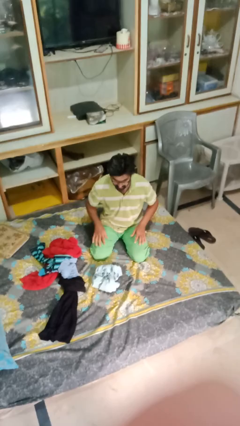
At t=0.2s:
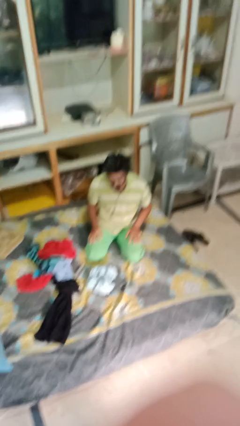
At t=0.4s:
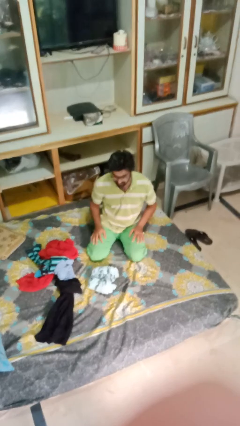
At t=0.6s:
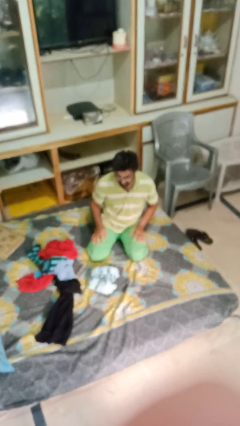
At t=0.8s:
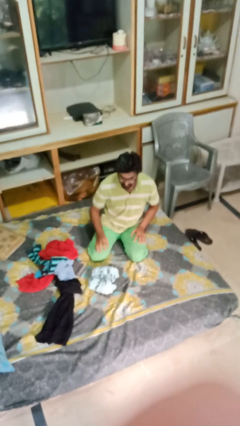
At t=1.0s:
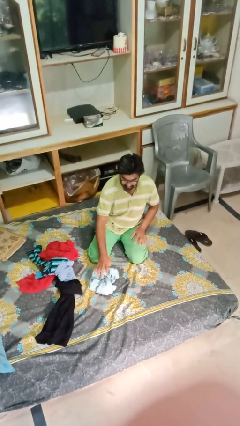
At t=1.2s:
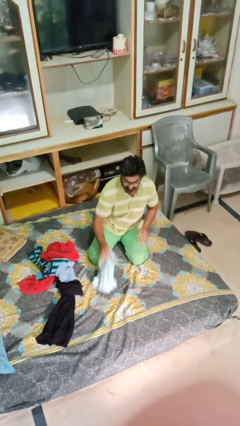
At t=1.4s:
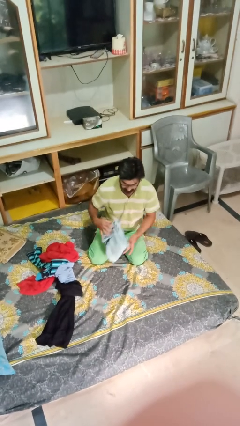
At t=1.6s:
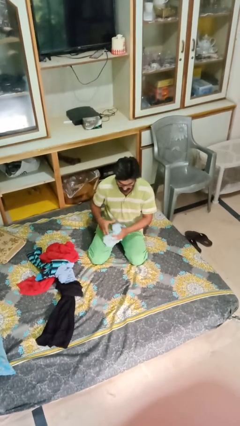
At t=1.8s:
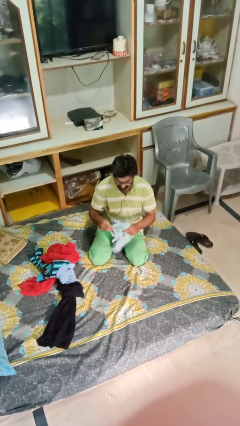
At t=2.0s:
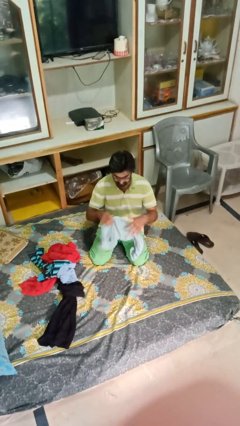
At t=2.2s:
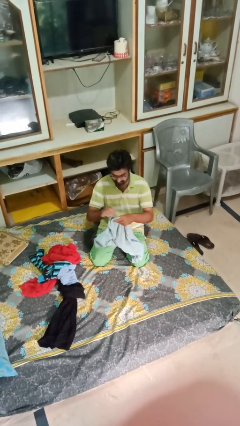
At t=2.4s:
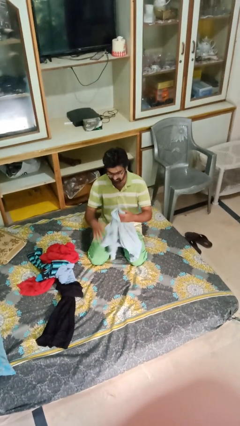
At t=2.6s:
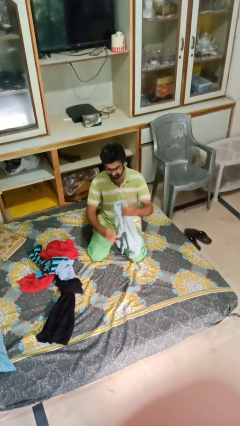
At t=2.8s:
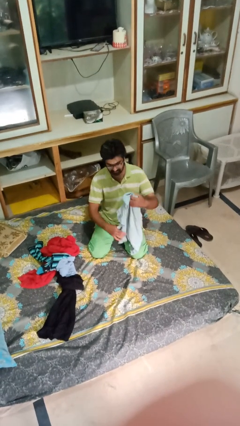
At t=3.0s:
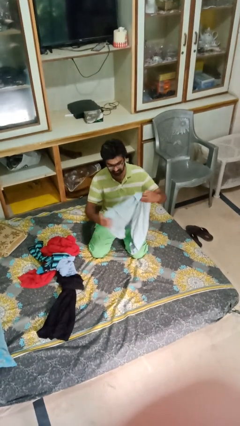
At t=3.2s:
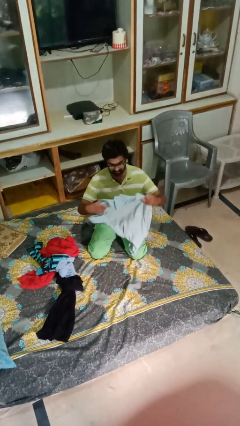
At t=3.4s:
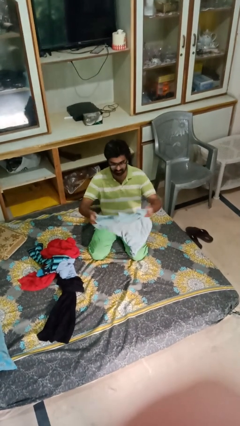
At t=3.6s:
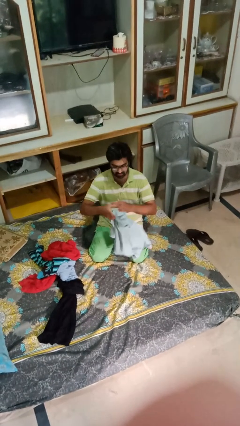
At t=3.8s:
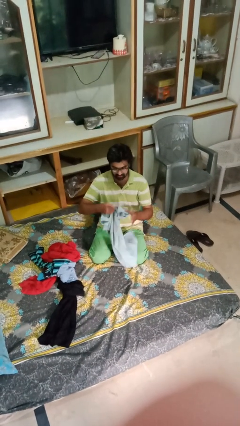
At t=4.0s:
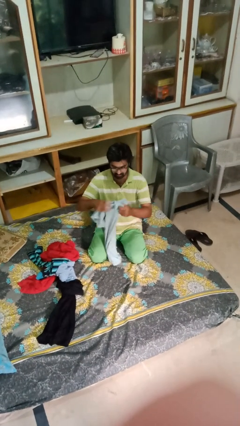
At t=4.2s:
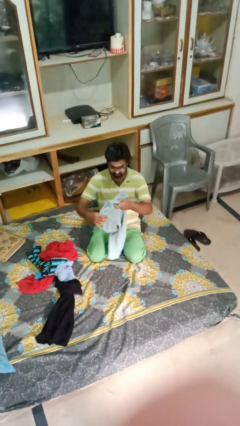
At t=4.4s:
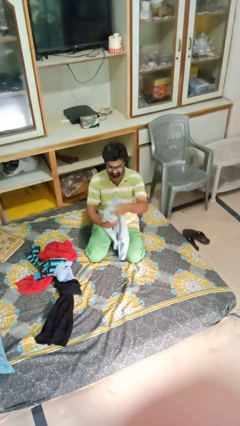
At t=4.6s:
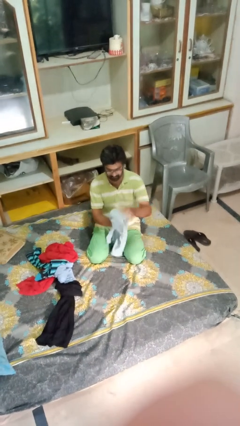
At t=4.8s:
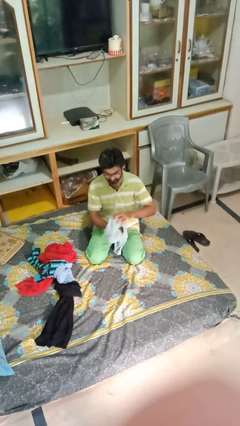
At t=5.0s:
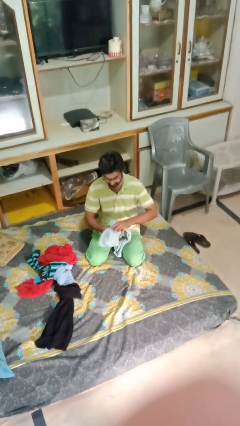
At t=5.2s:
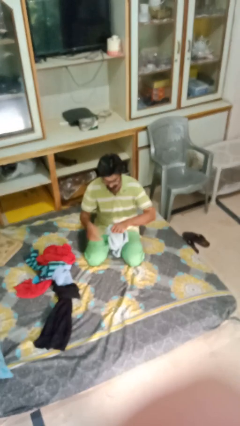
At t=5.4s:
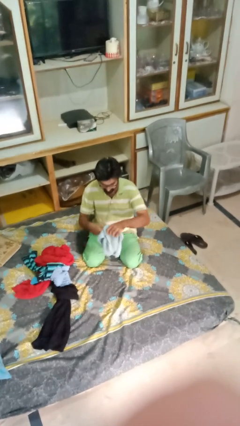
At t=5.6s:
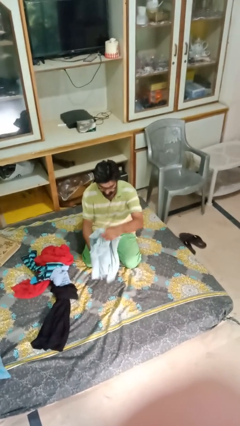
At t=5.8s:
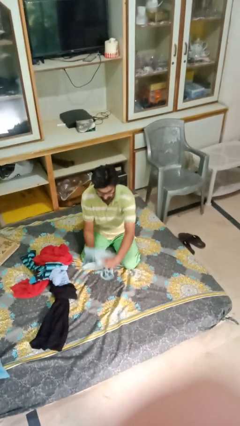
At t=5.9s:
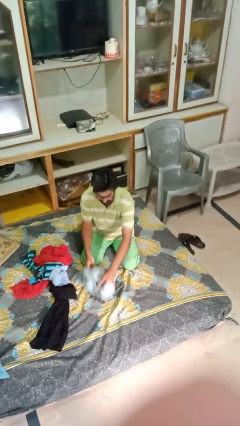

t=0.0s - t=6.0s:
person folds shirt

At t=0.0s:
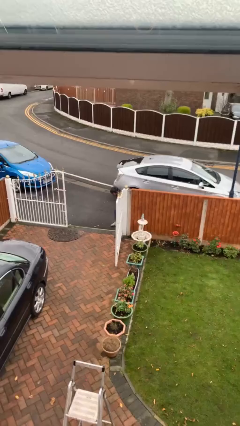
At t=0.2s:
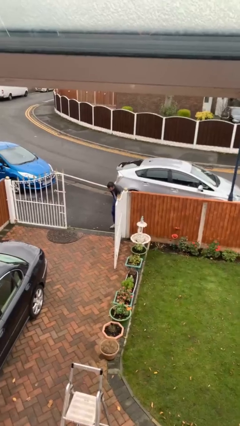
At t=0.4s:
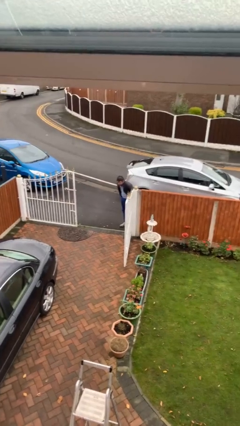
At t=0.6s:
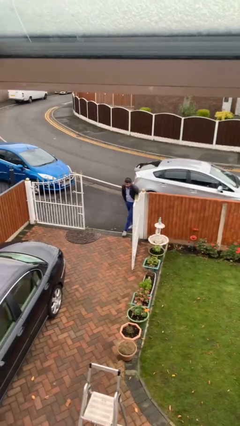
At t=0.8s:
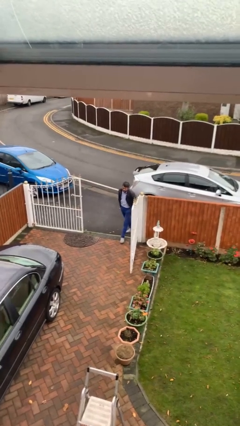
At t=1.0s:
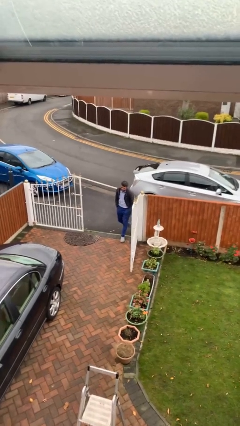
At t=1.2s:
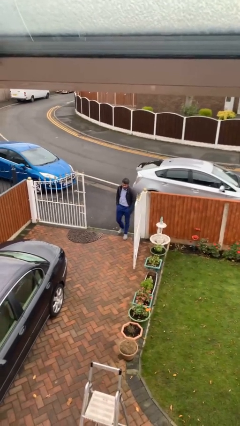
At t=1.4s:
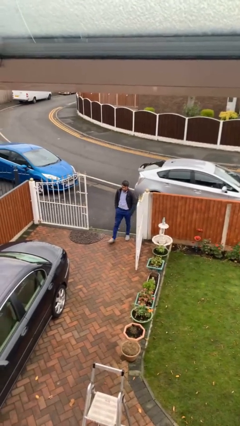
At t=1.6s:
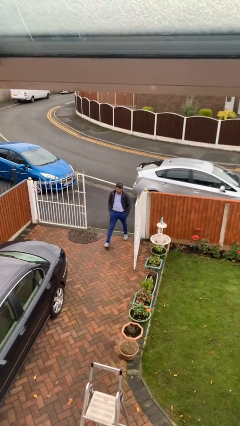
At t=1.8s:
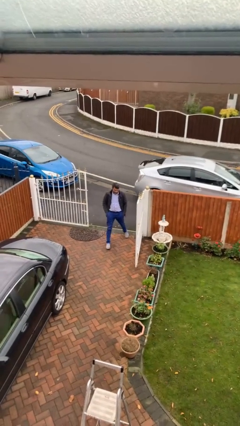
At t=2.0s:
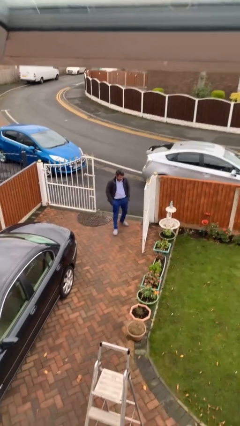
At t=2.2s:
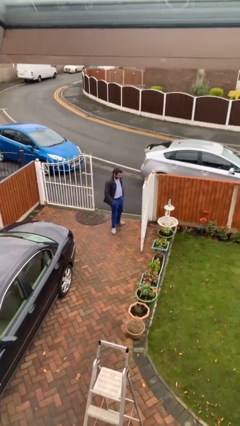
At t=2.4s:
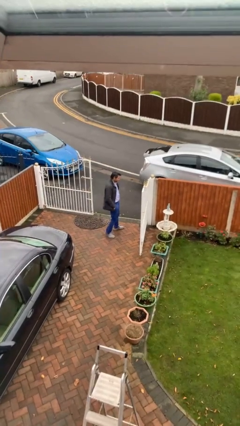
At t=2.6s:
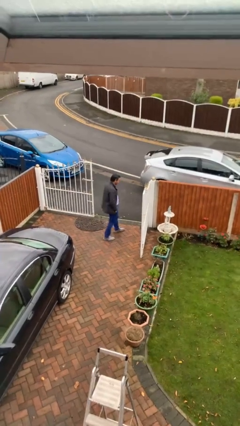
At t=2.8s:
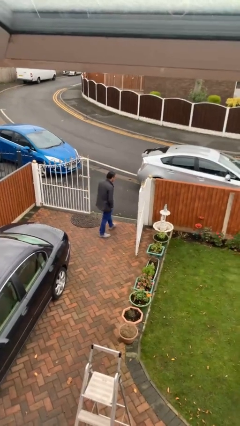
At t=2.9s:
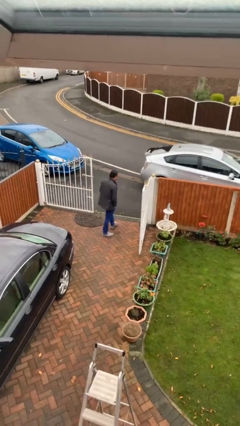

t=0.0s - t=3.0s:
person enters scene through structure

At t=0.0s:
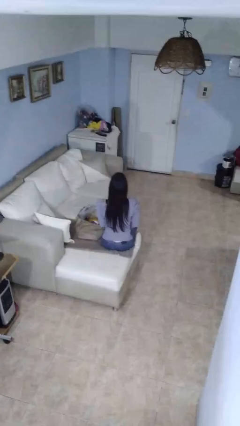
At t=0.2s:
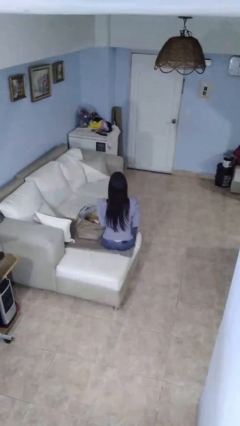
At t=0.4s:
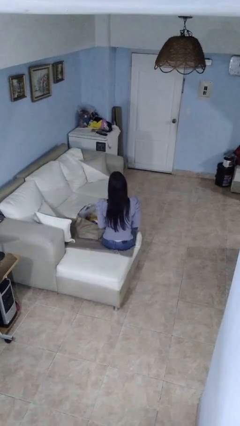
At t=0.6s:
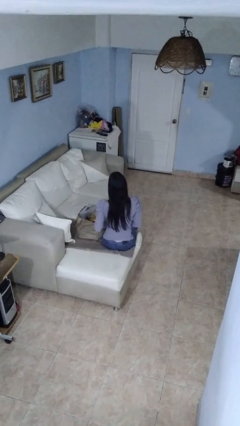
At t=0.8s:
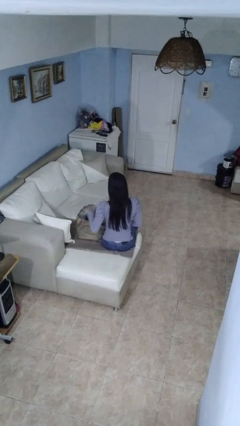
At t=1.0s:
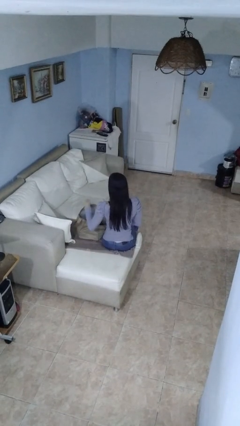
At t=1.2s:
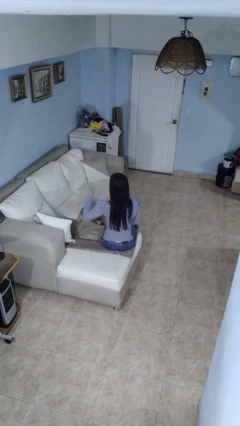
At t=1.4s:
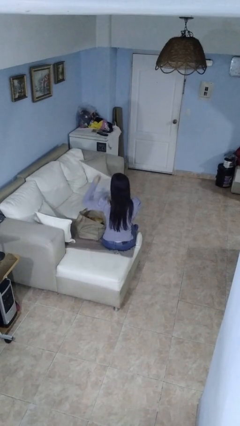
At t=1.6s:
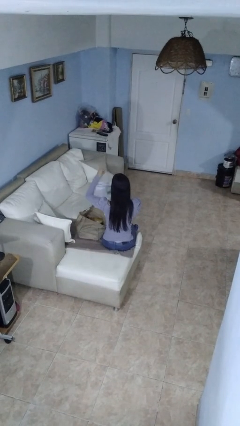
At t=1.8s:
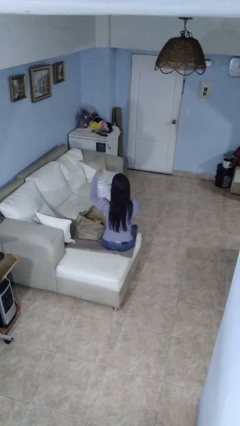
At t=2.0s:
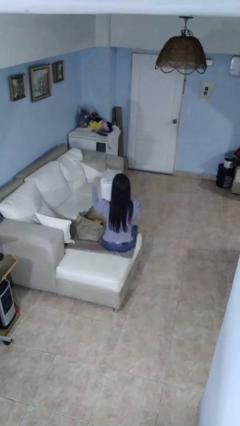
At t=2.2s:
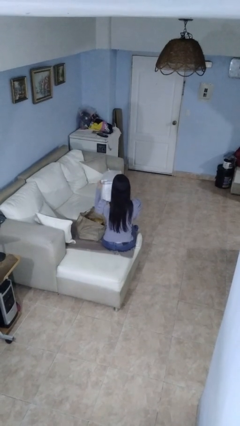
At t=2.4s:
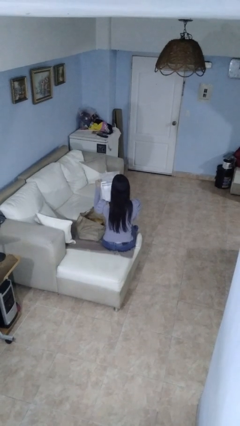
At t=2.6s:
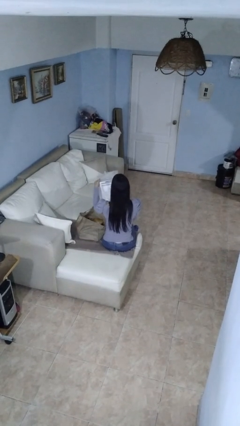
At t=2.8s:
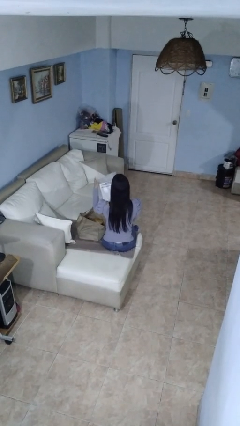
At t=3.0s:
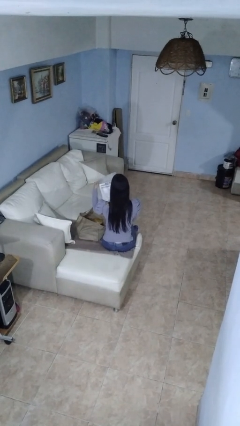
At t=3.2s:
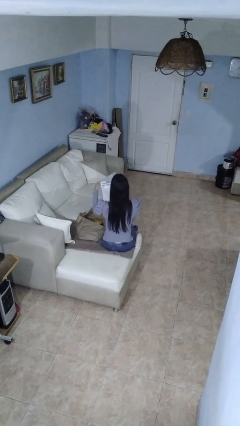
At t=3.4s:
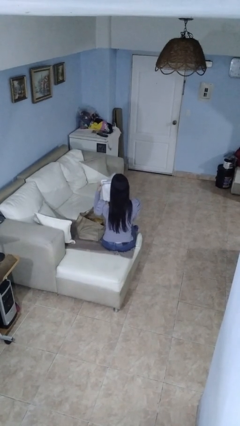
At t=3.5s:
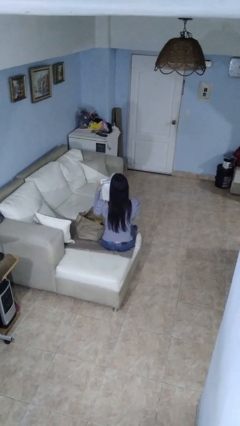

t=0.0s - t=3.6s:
person takes object from bag

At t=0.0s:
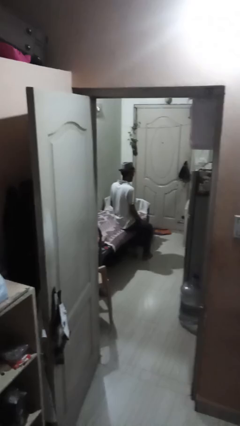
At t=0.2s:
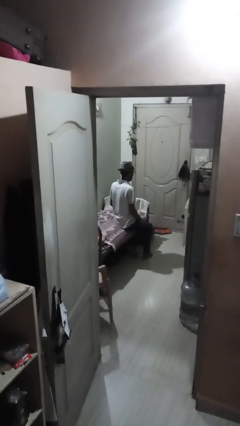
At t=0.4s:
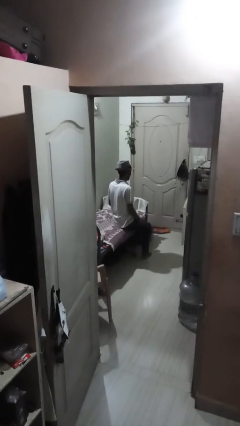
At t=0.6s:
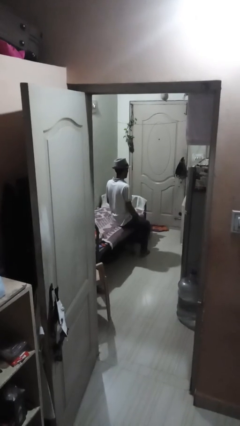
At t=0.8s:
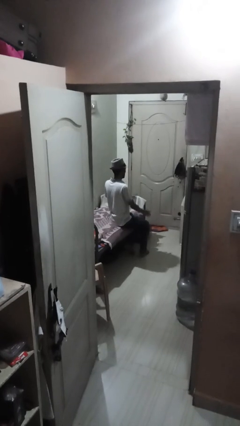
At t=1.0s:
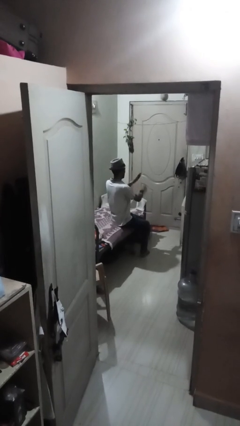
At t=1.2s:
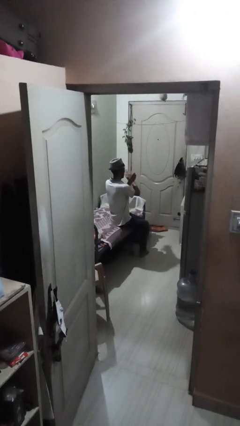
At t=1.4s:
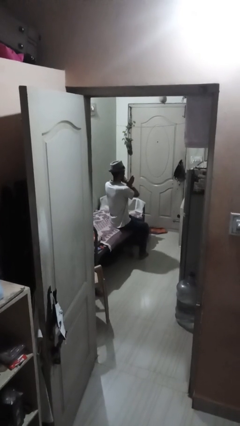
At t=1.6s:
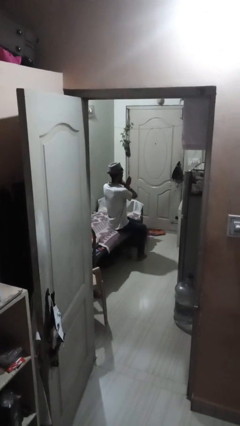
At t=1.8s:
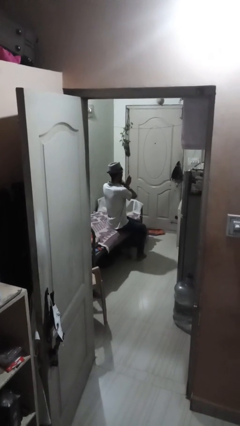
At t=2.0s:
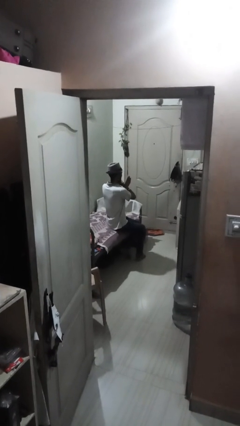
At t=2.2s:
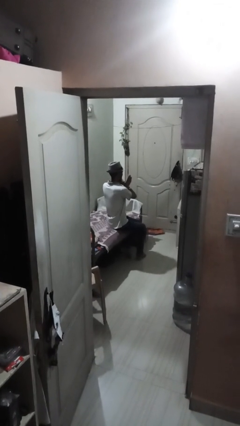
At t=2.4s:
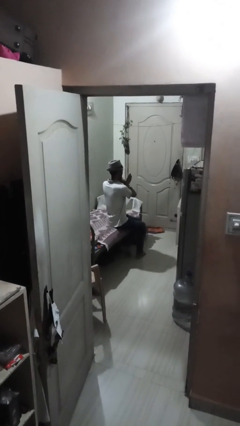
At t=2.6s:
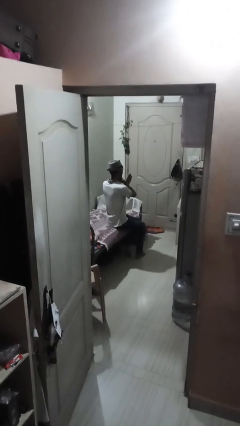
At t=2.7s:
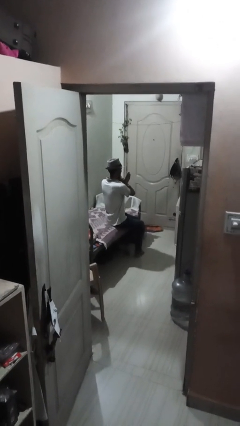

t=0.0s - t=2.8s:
person gestures arms x

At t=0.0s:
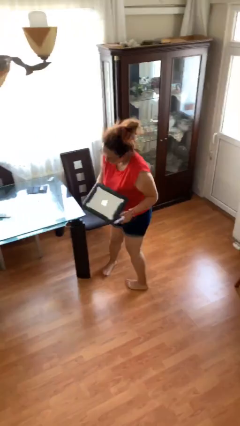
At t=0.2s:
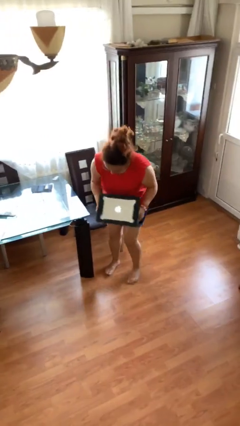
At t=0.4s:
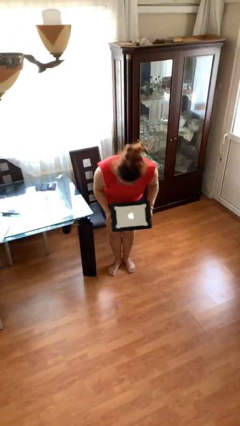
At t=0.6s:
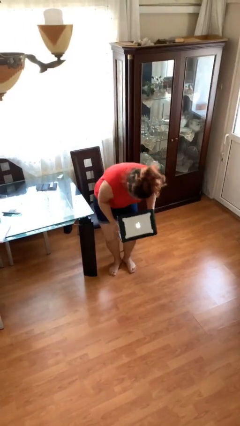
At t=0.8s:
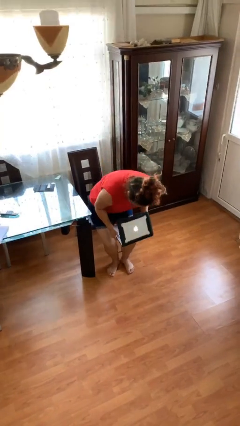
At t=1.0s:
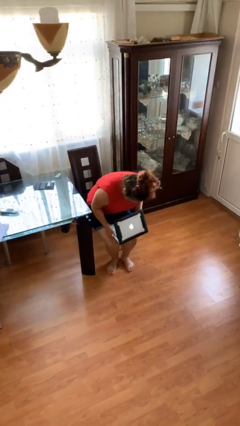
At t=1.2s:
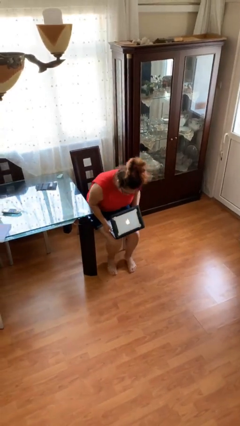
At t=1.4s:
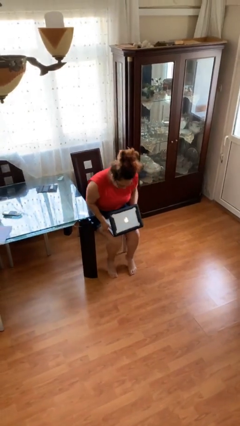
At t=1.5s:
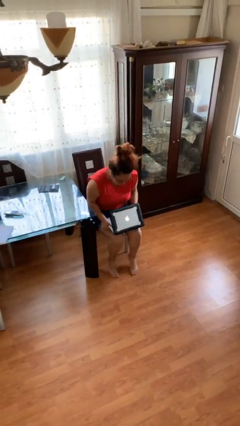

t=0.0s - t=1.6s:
person sits down

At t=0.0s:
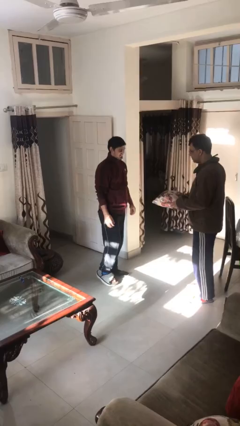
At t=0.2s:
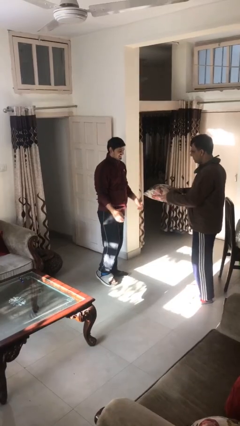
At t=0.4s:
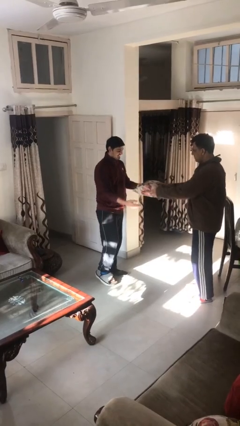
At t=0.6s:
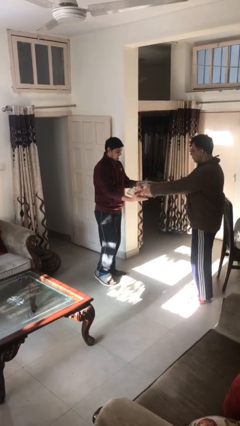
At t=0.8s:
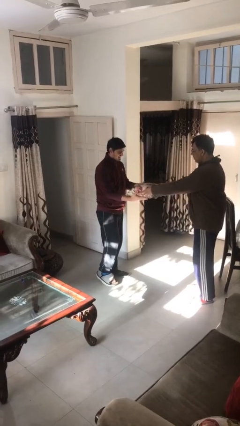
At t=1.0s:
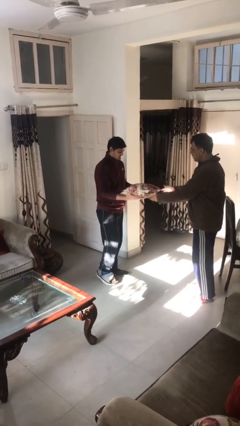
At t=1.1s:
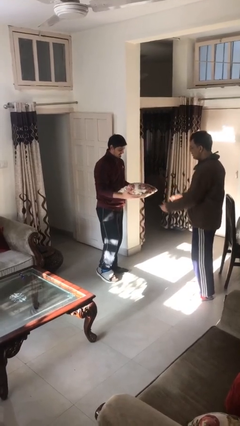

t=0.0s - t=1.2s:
person transfers object to person
